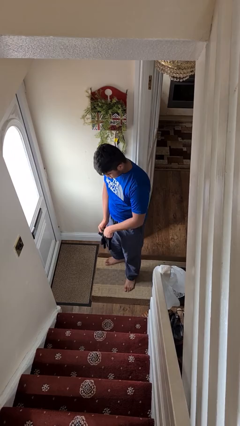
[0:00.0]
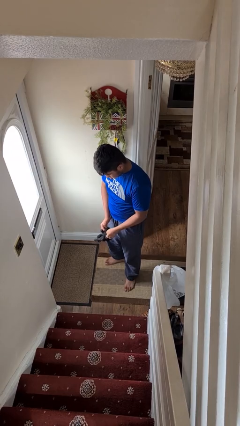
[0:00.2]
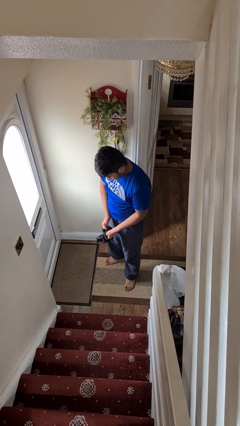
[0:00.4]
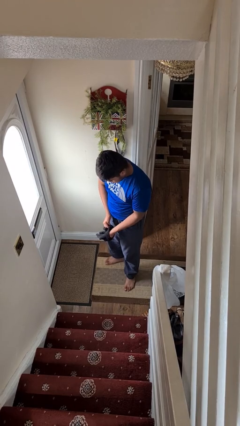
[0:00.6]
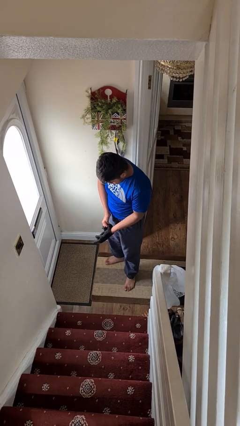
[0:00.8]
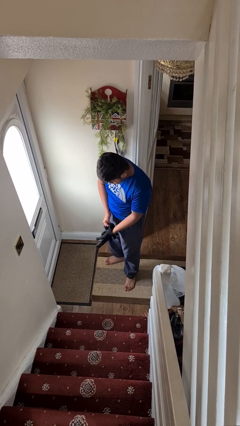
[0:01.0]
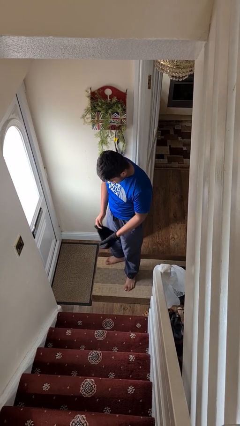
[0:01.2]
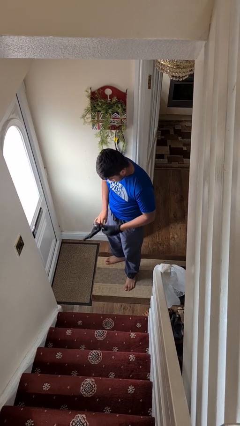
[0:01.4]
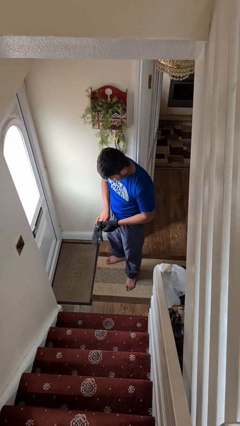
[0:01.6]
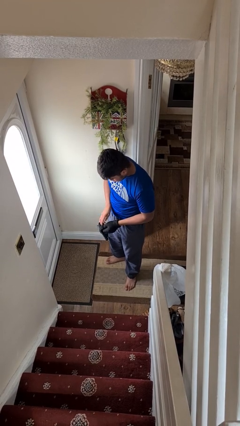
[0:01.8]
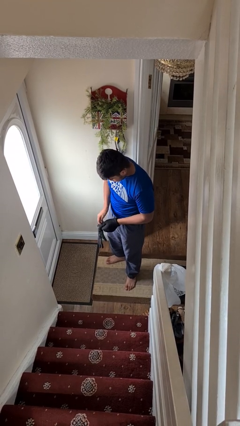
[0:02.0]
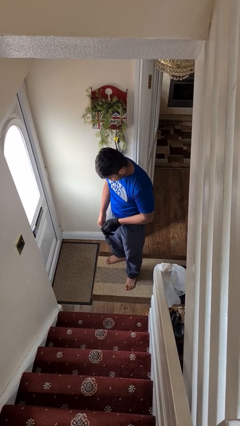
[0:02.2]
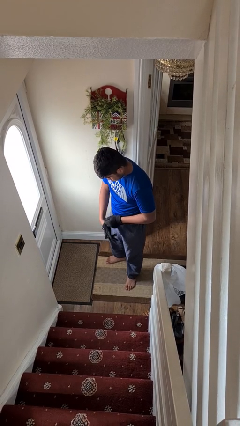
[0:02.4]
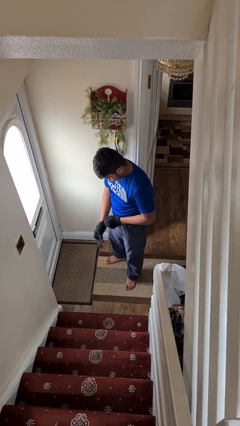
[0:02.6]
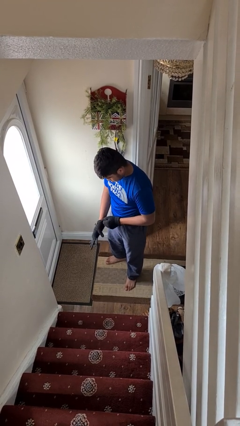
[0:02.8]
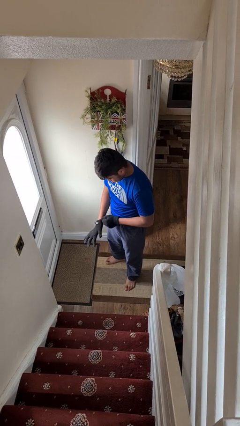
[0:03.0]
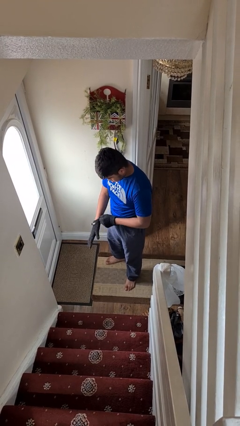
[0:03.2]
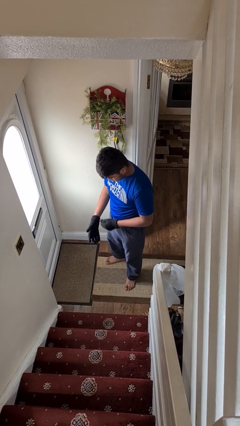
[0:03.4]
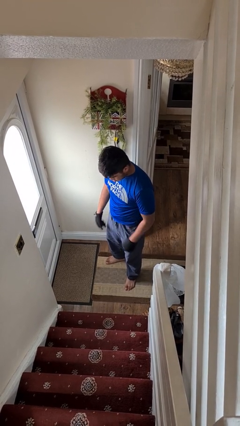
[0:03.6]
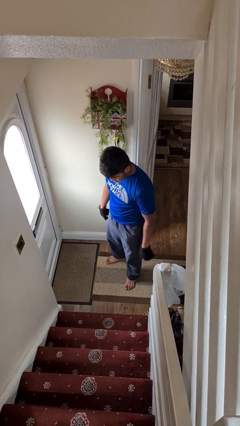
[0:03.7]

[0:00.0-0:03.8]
person puts on gloves

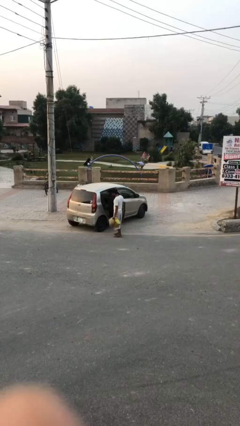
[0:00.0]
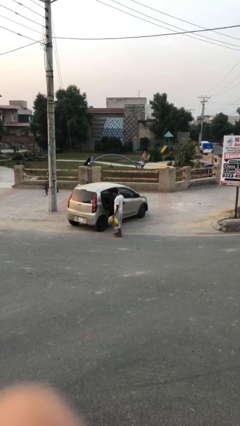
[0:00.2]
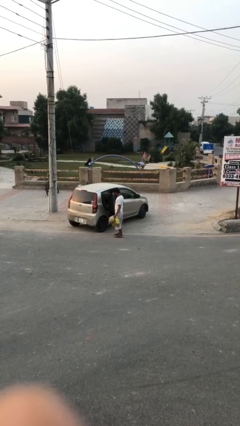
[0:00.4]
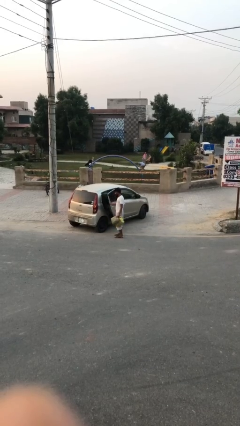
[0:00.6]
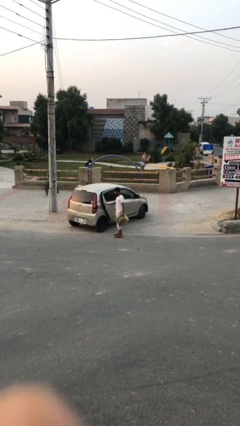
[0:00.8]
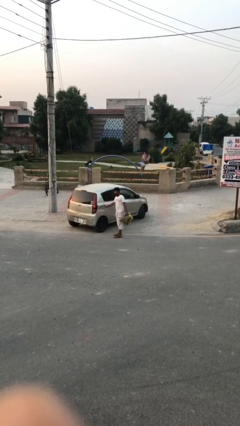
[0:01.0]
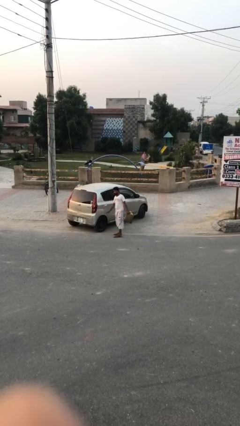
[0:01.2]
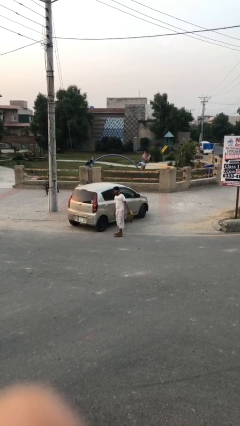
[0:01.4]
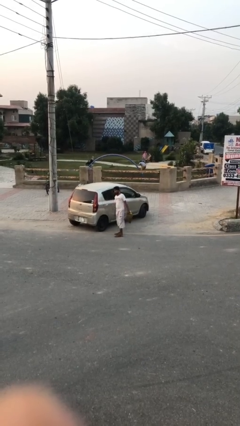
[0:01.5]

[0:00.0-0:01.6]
person closes car door

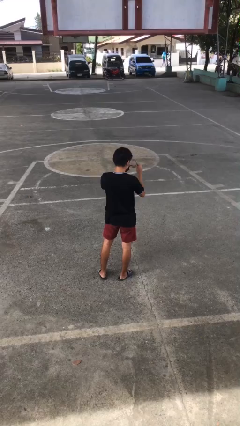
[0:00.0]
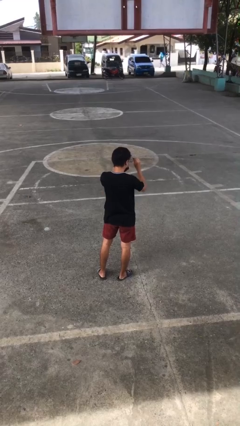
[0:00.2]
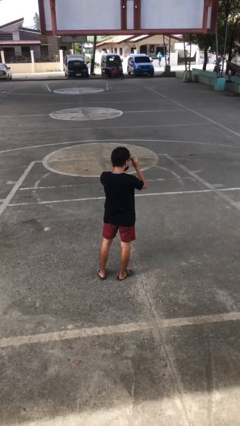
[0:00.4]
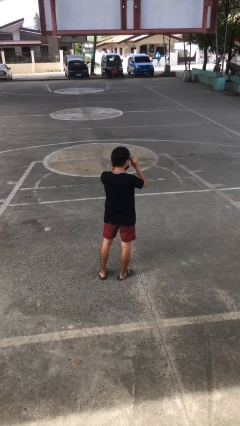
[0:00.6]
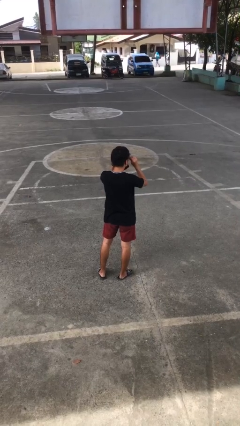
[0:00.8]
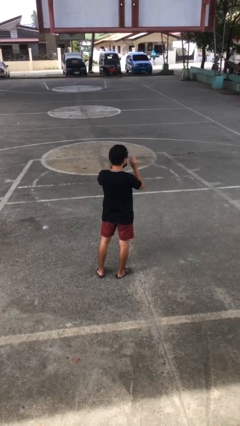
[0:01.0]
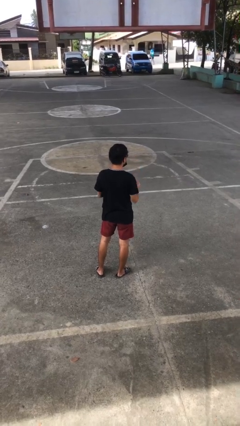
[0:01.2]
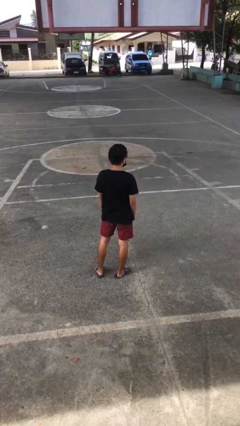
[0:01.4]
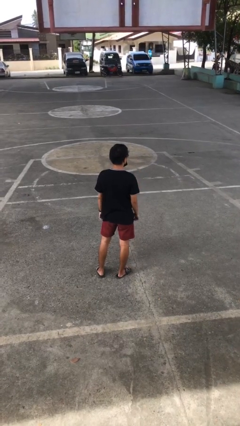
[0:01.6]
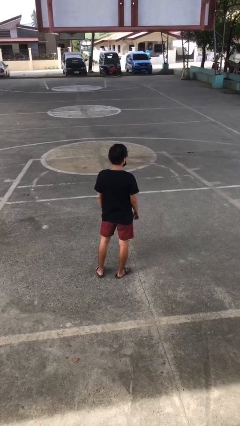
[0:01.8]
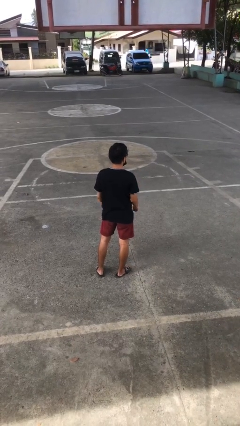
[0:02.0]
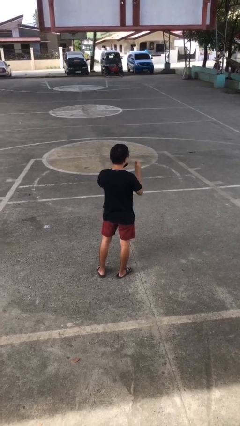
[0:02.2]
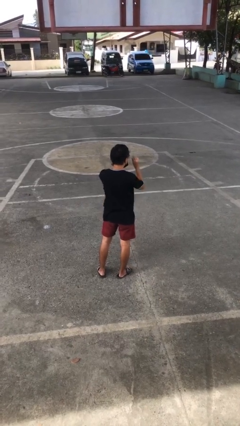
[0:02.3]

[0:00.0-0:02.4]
person puts on glasses

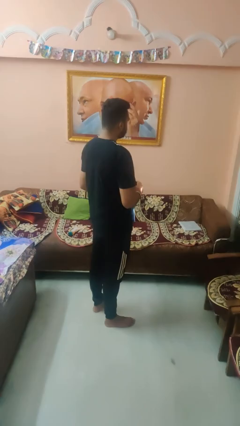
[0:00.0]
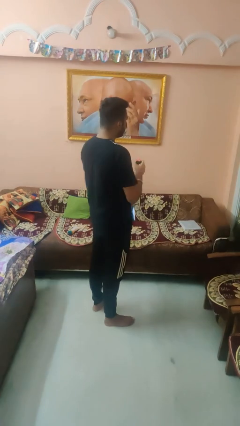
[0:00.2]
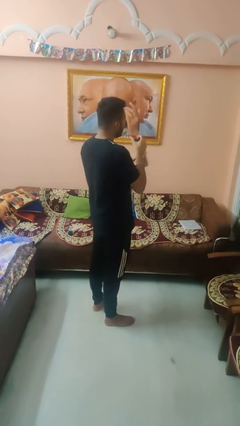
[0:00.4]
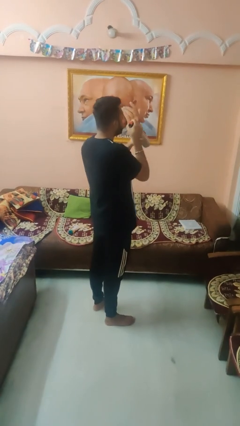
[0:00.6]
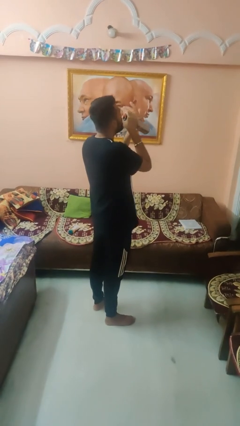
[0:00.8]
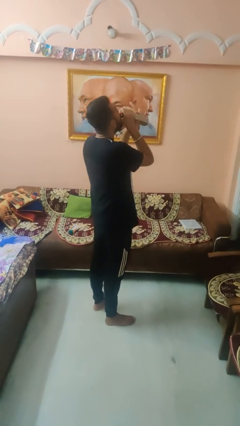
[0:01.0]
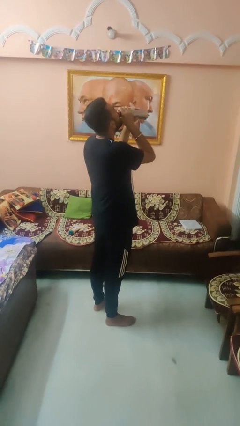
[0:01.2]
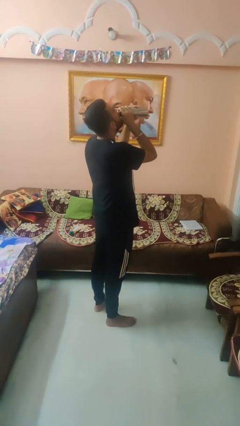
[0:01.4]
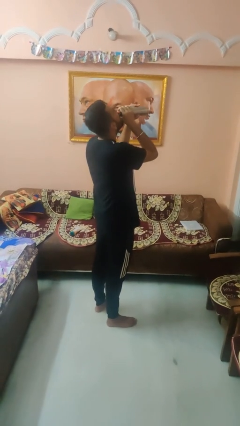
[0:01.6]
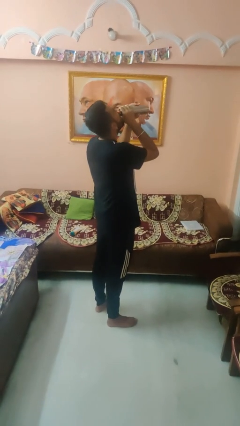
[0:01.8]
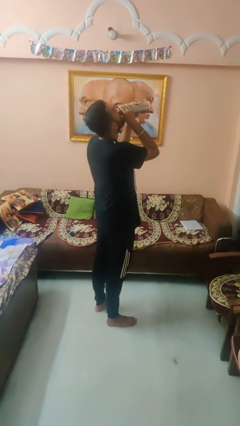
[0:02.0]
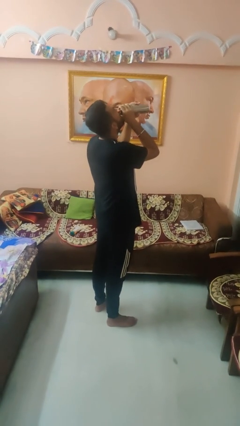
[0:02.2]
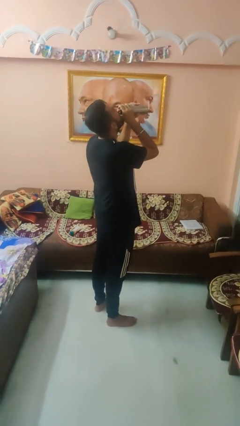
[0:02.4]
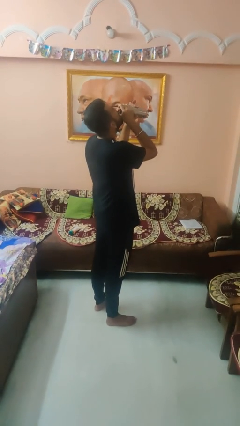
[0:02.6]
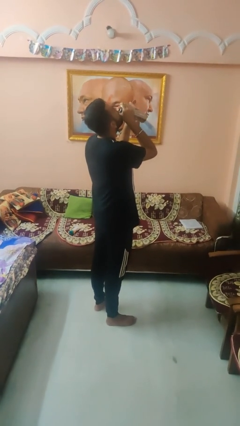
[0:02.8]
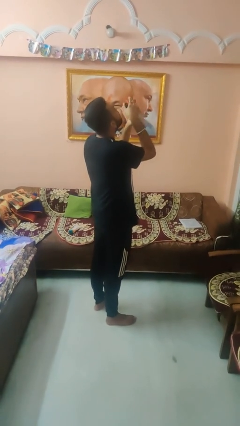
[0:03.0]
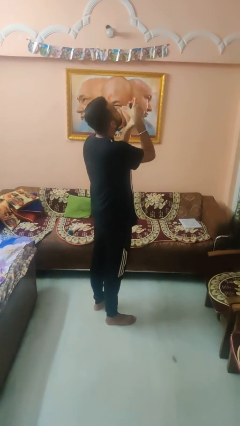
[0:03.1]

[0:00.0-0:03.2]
person drinks from bottle

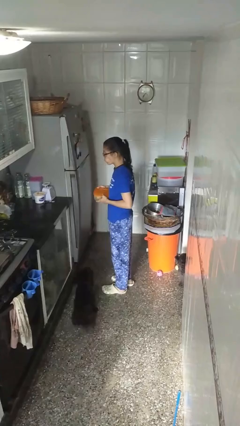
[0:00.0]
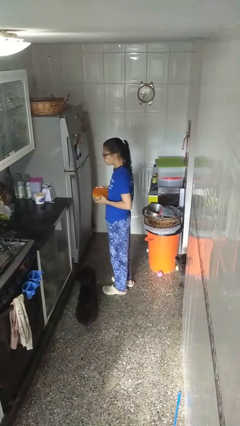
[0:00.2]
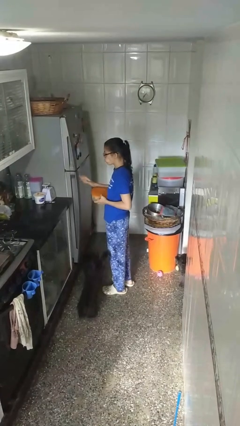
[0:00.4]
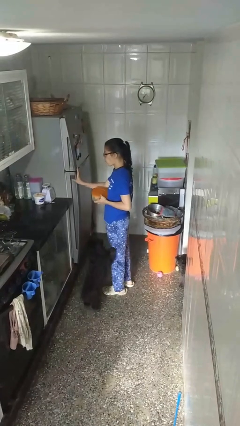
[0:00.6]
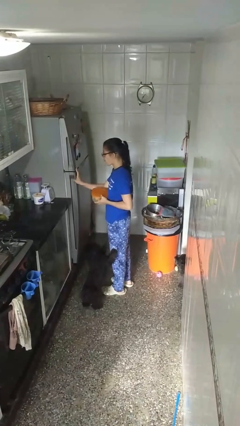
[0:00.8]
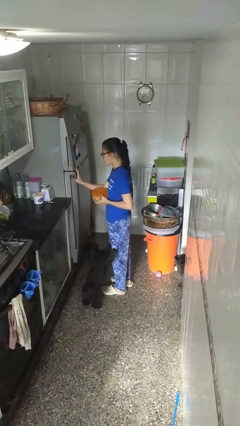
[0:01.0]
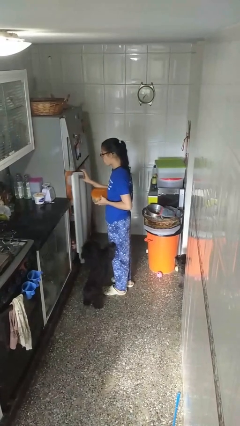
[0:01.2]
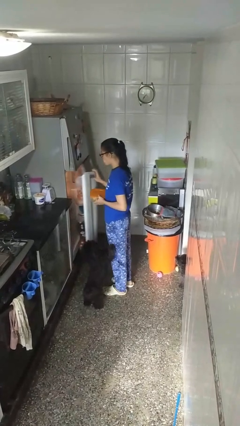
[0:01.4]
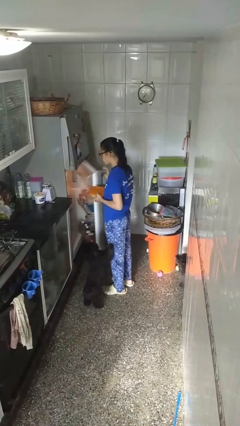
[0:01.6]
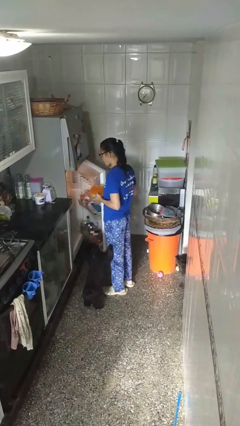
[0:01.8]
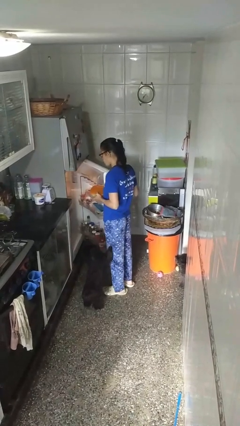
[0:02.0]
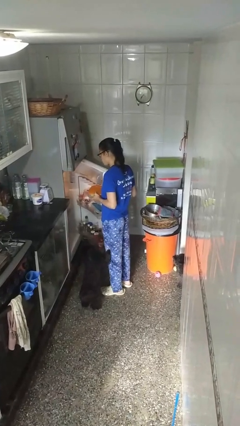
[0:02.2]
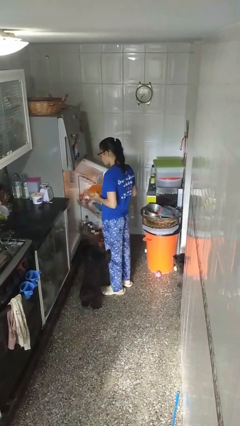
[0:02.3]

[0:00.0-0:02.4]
person opens refrigerator

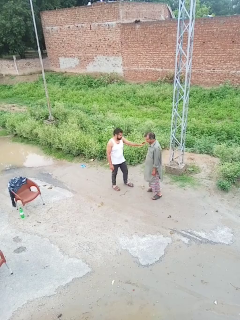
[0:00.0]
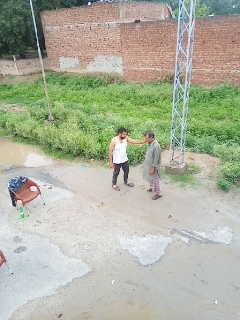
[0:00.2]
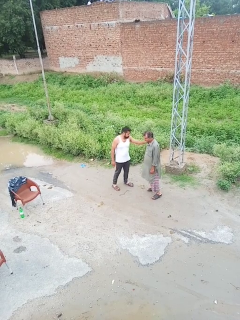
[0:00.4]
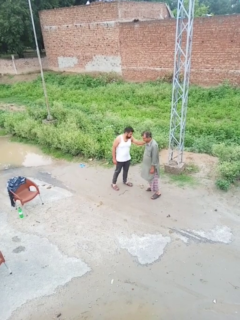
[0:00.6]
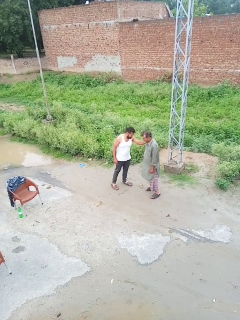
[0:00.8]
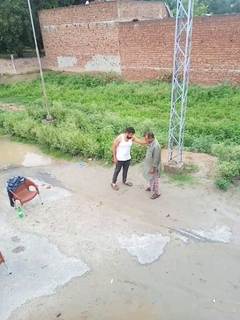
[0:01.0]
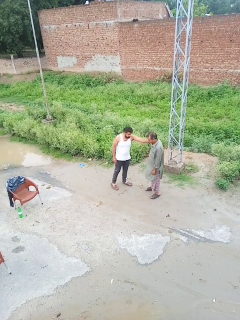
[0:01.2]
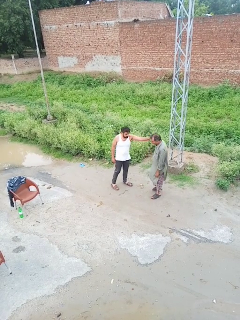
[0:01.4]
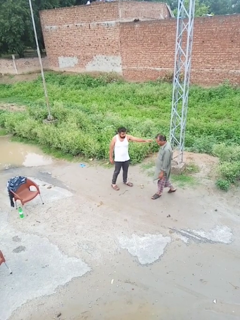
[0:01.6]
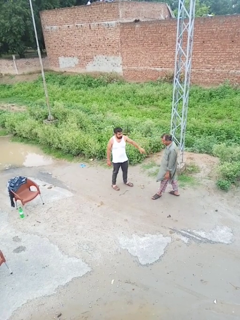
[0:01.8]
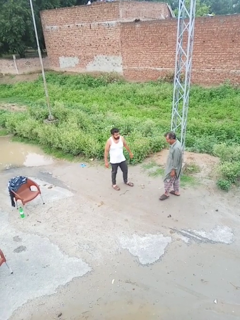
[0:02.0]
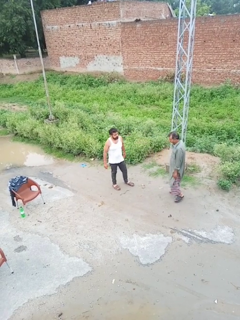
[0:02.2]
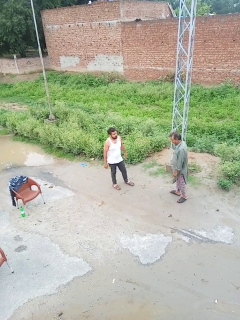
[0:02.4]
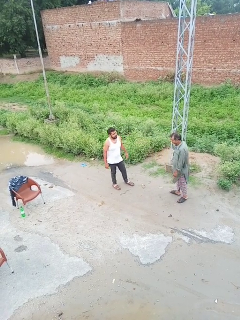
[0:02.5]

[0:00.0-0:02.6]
person shoves person

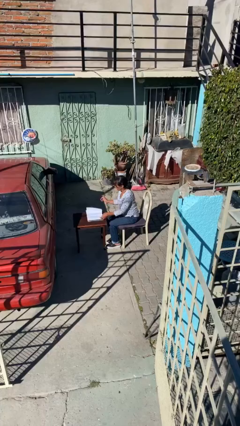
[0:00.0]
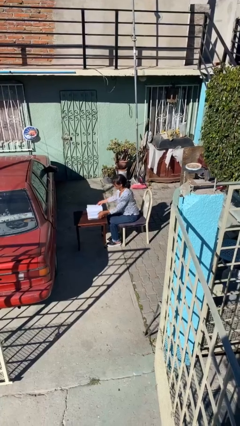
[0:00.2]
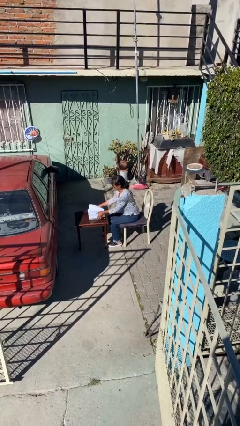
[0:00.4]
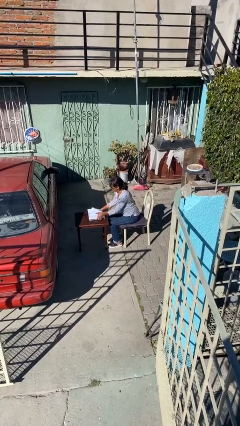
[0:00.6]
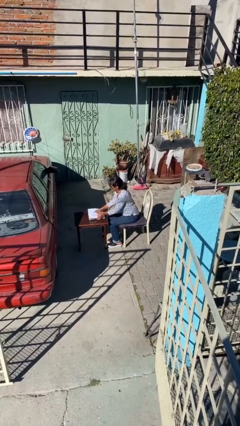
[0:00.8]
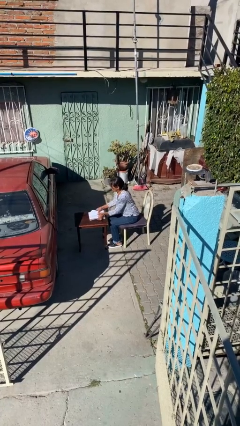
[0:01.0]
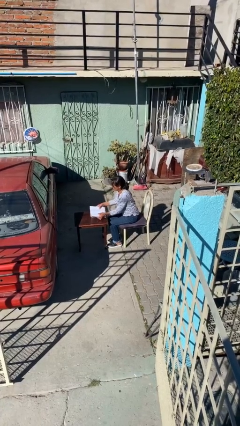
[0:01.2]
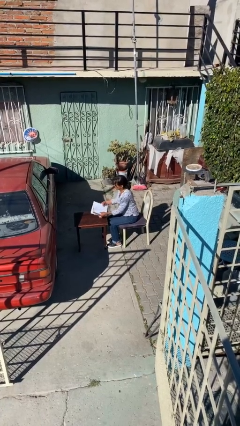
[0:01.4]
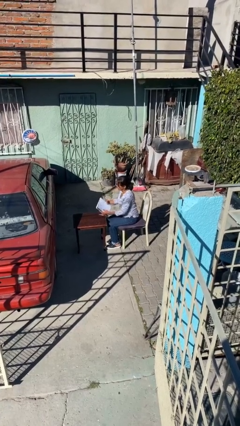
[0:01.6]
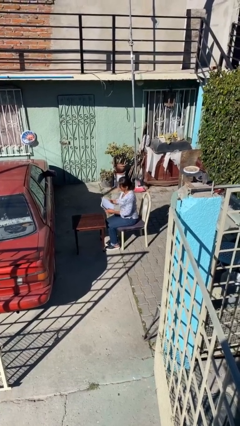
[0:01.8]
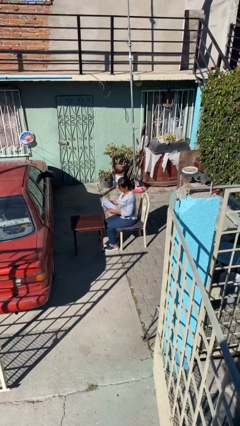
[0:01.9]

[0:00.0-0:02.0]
person picks up object from table
